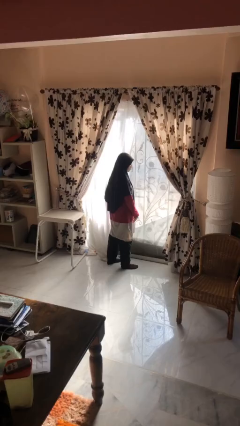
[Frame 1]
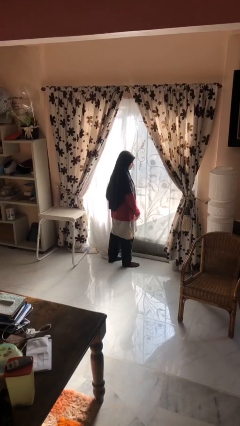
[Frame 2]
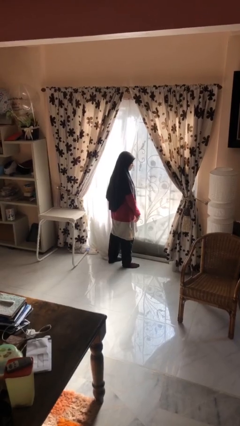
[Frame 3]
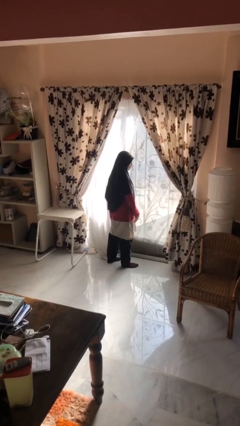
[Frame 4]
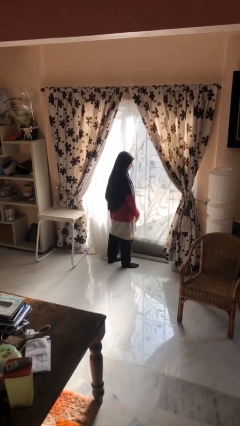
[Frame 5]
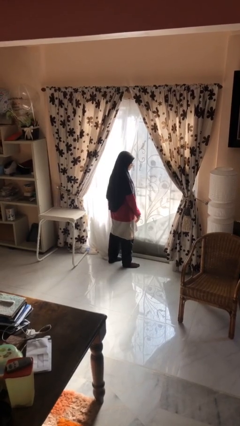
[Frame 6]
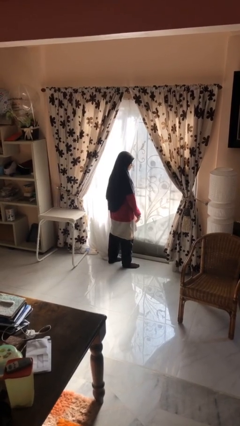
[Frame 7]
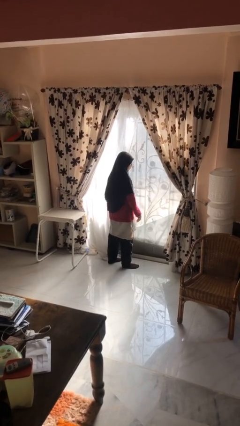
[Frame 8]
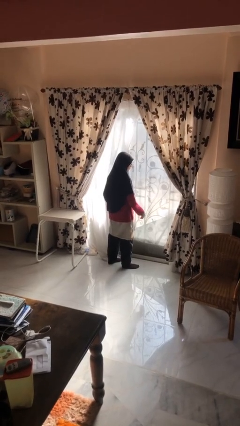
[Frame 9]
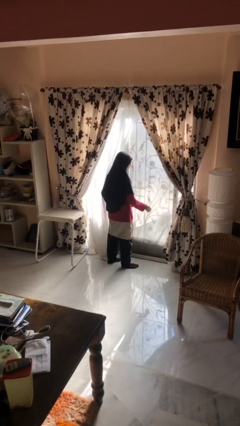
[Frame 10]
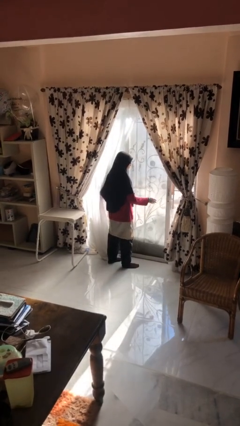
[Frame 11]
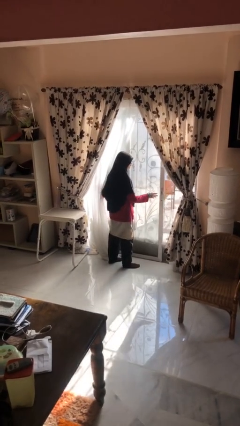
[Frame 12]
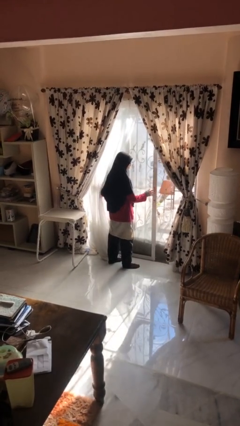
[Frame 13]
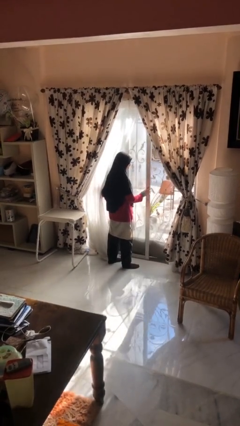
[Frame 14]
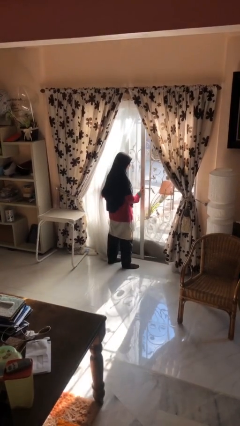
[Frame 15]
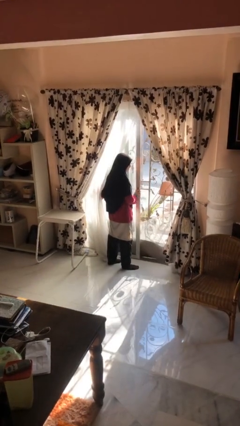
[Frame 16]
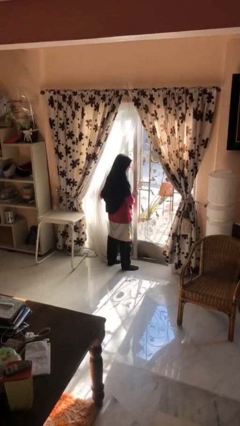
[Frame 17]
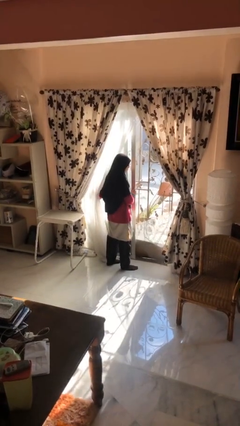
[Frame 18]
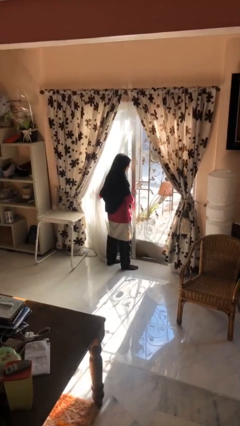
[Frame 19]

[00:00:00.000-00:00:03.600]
person opens sliding door

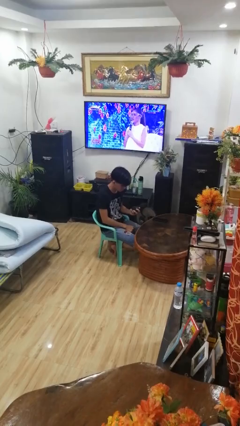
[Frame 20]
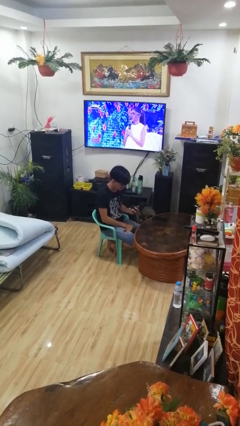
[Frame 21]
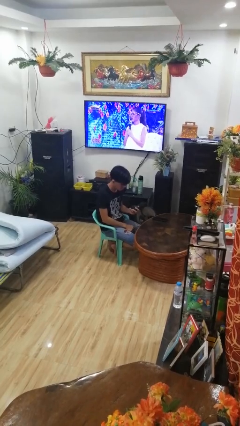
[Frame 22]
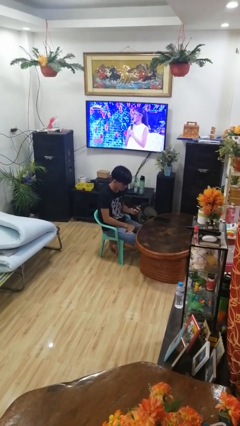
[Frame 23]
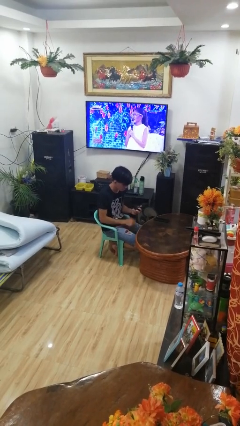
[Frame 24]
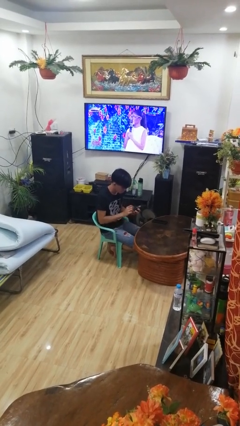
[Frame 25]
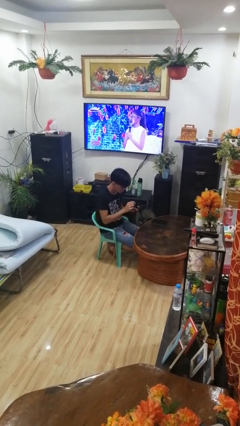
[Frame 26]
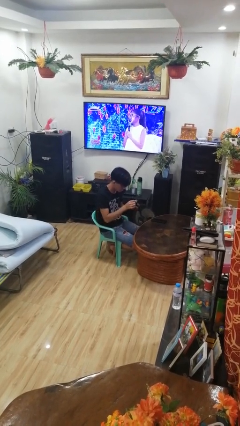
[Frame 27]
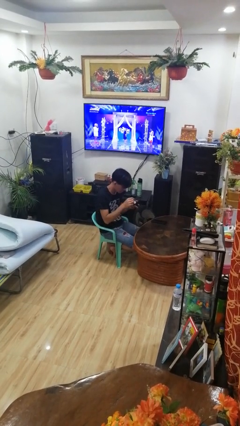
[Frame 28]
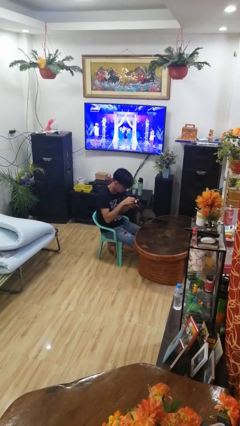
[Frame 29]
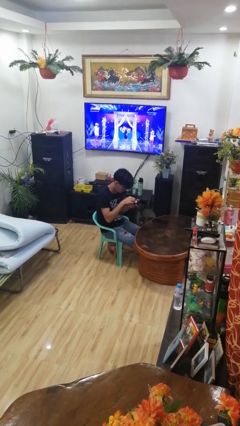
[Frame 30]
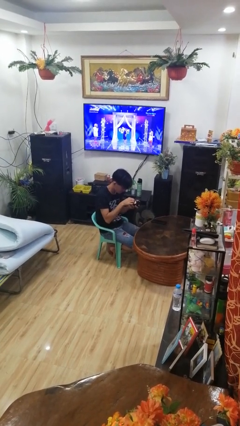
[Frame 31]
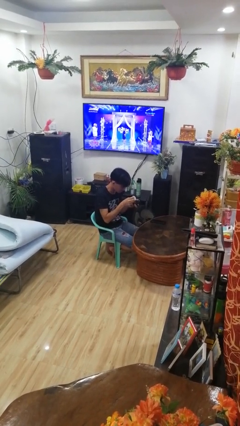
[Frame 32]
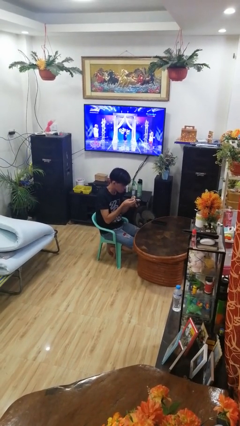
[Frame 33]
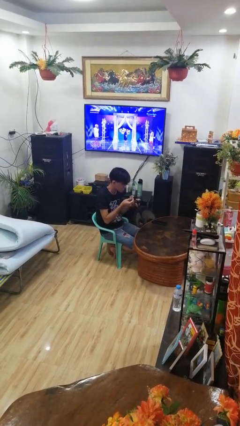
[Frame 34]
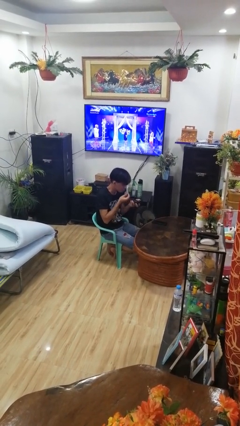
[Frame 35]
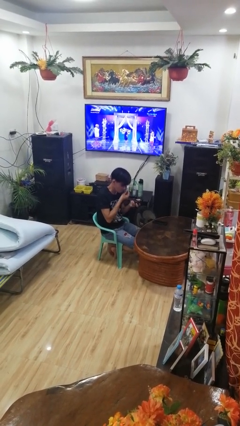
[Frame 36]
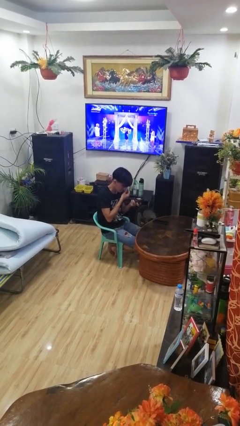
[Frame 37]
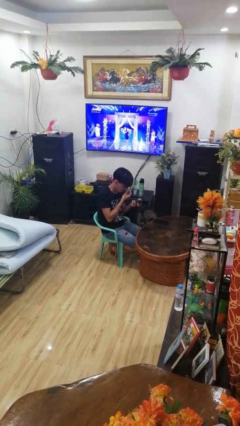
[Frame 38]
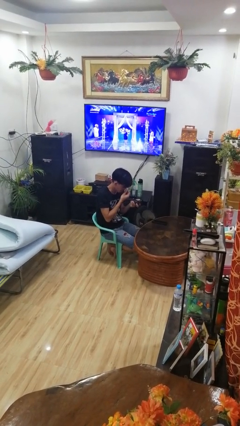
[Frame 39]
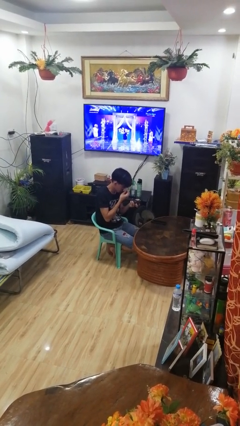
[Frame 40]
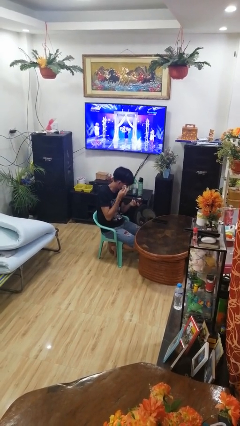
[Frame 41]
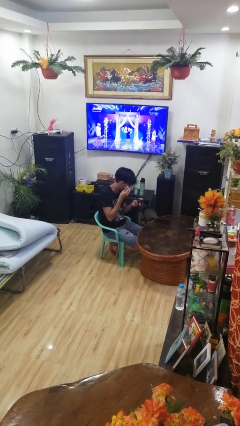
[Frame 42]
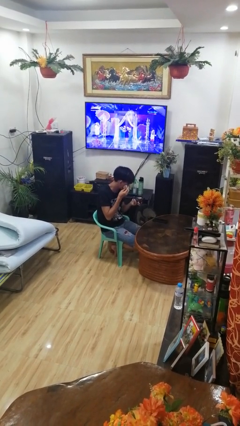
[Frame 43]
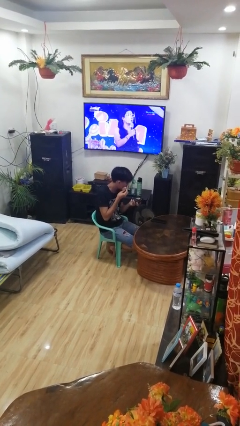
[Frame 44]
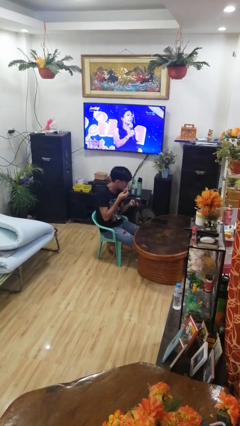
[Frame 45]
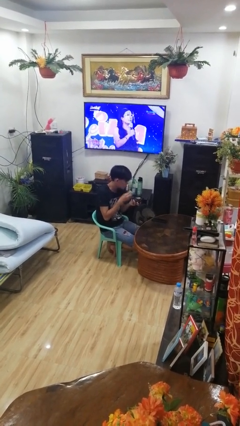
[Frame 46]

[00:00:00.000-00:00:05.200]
person applies foundation makeup

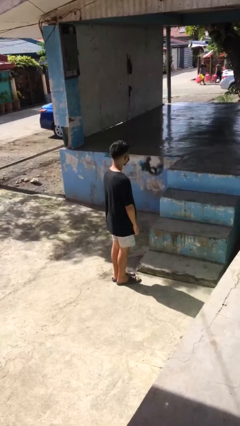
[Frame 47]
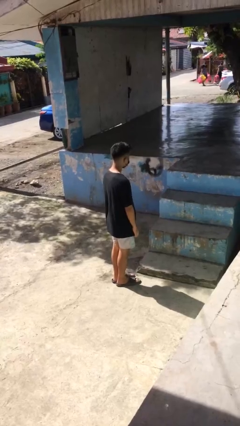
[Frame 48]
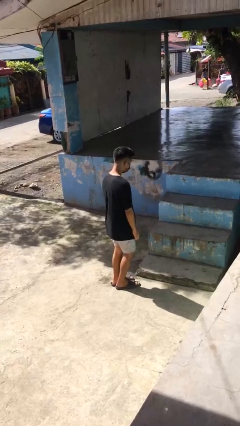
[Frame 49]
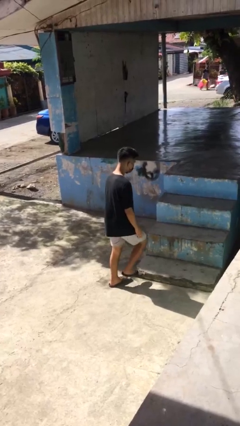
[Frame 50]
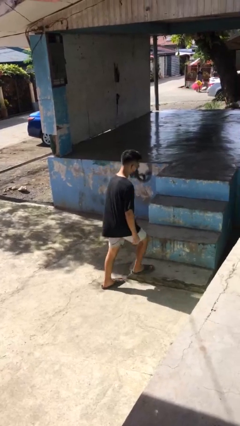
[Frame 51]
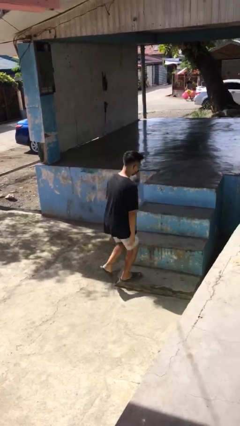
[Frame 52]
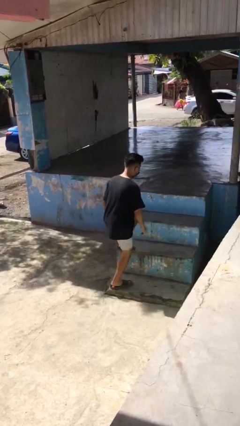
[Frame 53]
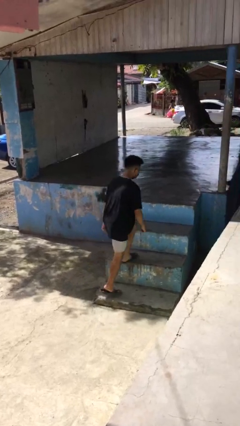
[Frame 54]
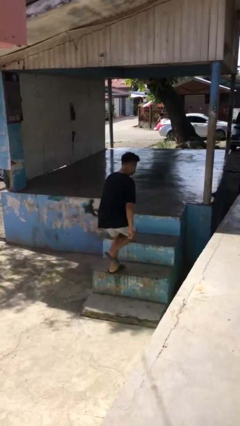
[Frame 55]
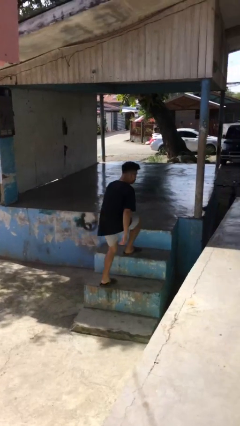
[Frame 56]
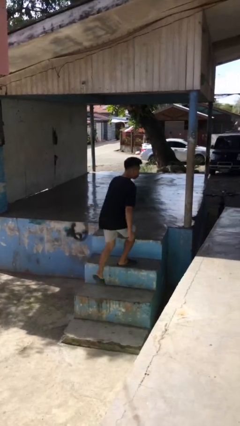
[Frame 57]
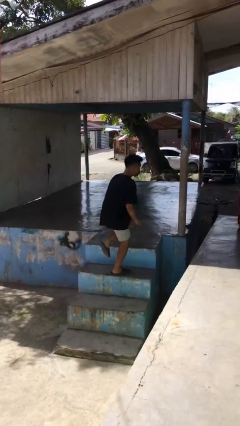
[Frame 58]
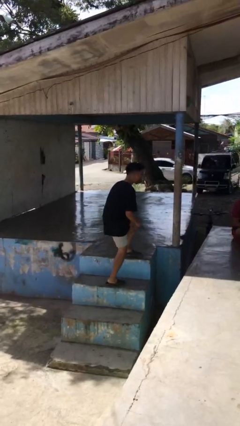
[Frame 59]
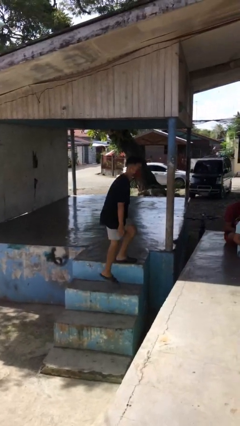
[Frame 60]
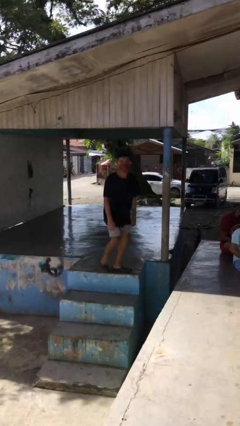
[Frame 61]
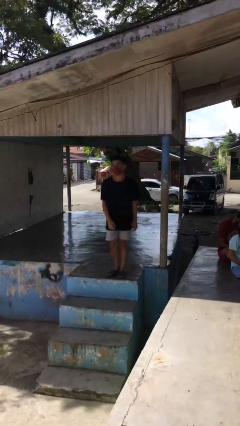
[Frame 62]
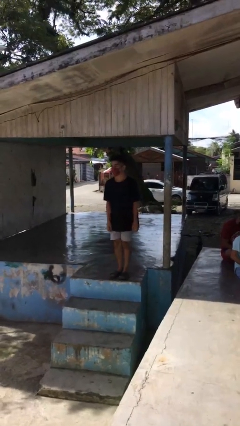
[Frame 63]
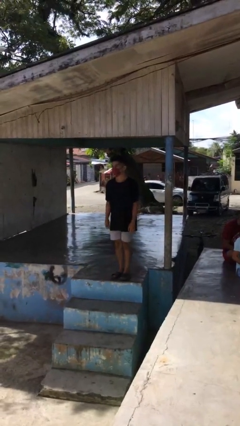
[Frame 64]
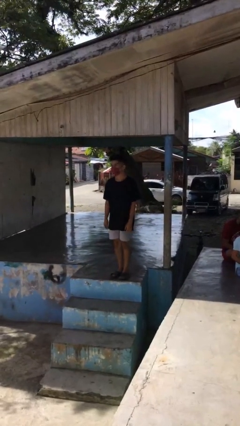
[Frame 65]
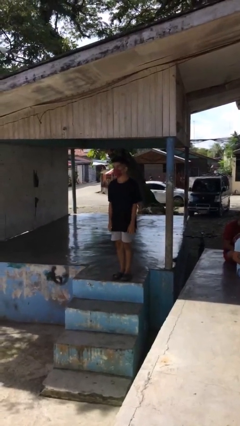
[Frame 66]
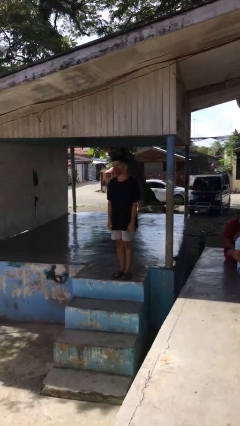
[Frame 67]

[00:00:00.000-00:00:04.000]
person climbs up stairs

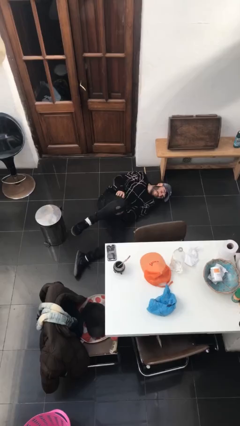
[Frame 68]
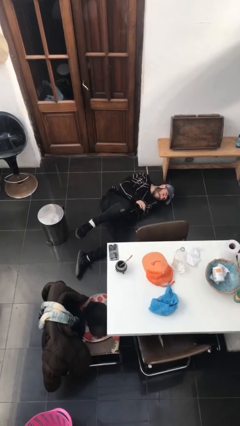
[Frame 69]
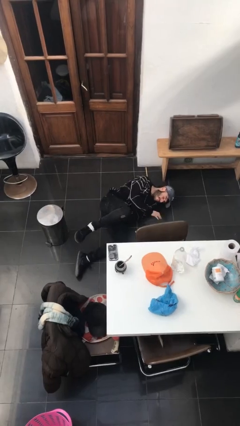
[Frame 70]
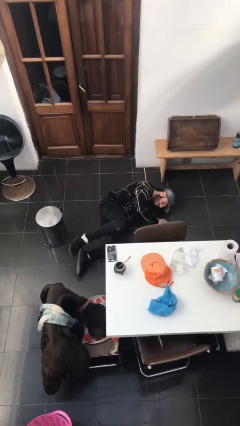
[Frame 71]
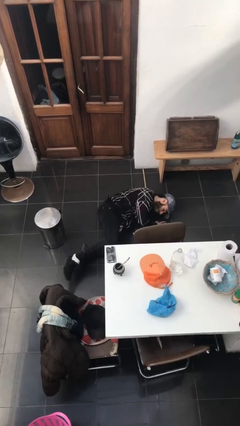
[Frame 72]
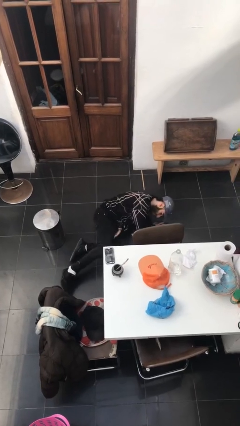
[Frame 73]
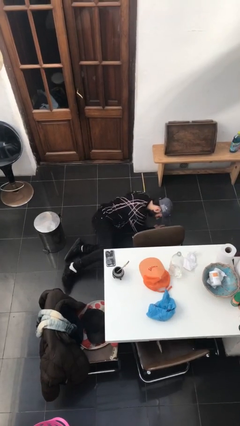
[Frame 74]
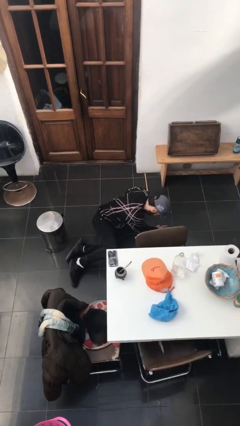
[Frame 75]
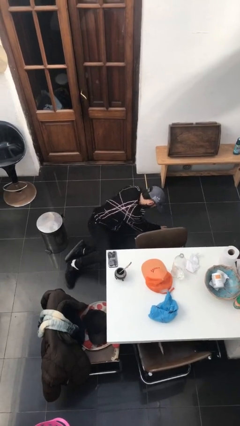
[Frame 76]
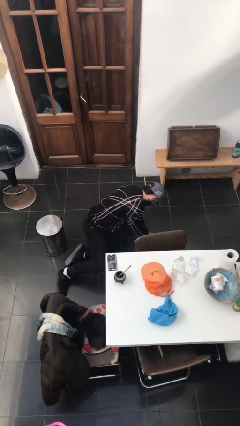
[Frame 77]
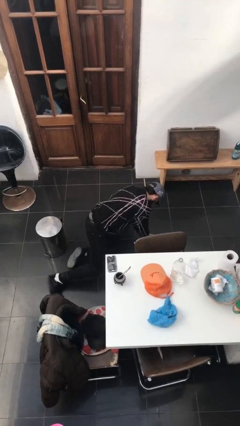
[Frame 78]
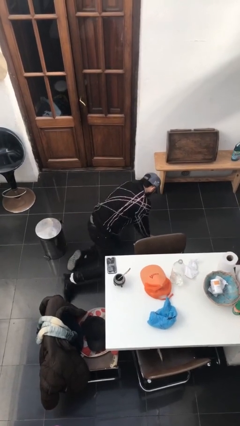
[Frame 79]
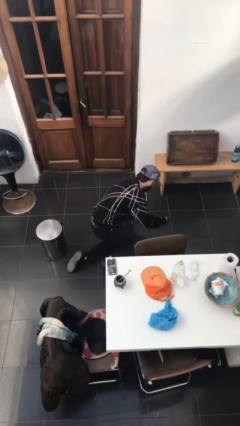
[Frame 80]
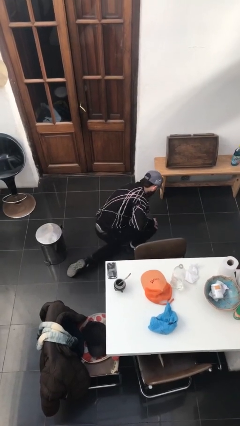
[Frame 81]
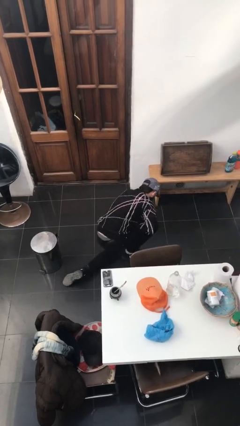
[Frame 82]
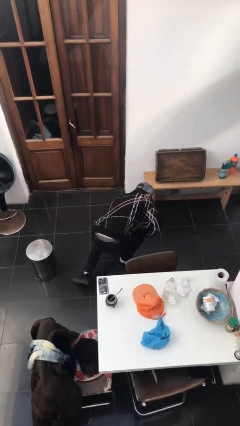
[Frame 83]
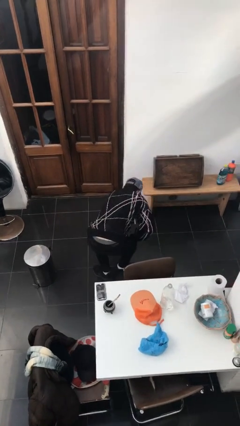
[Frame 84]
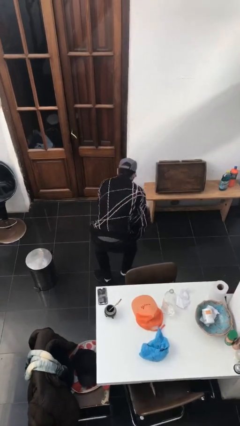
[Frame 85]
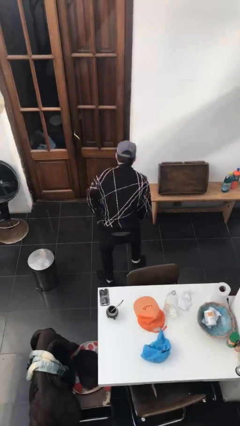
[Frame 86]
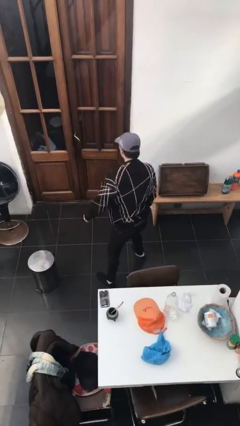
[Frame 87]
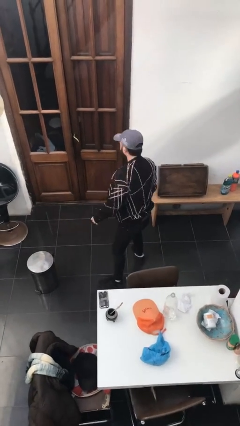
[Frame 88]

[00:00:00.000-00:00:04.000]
person stands up from floor

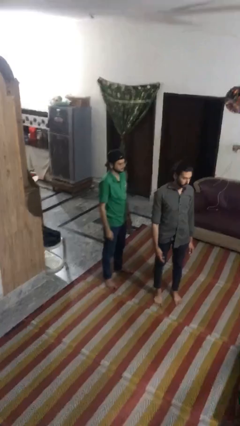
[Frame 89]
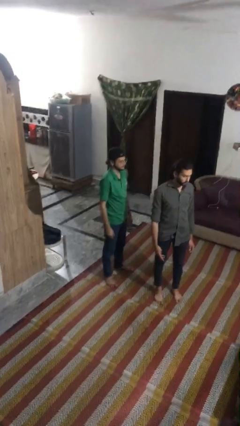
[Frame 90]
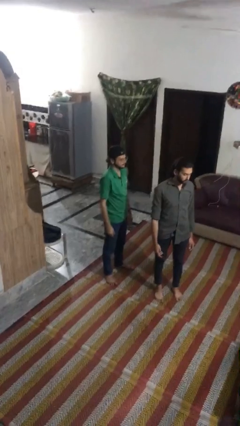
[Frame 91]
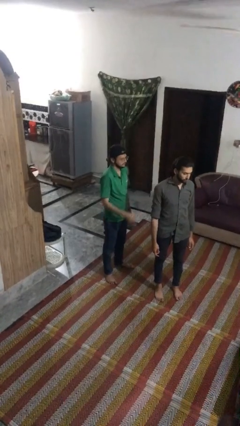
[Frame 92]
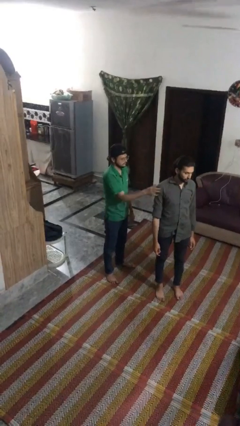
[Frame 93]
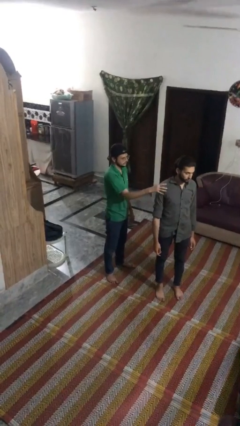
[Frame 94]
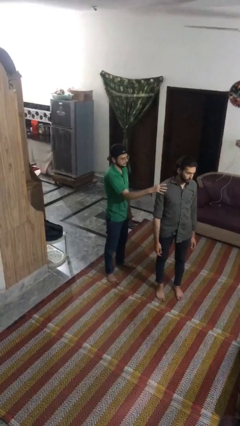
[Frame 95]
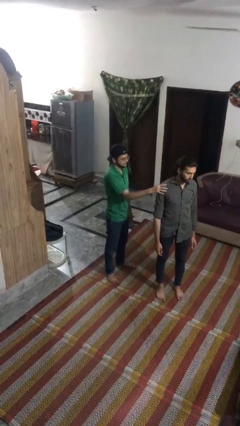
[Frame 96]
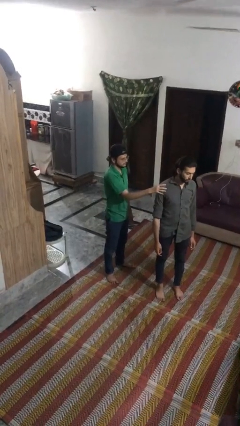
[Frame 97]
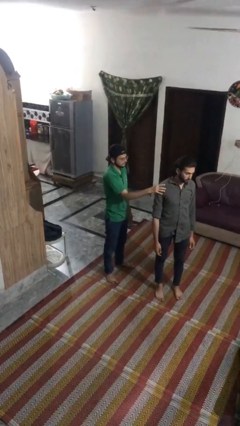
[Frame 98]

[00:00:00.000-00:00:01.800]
person grabs person by shoulder
